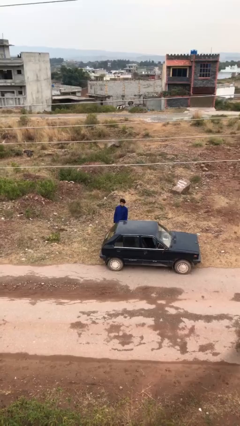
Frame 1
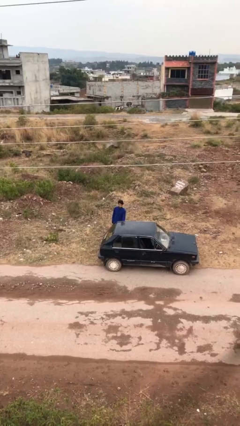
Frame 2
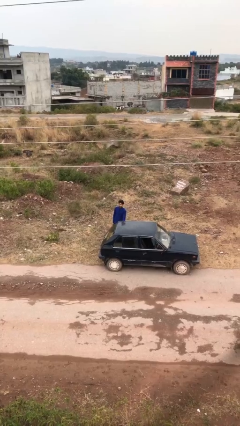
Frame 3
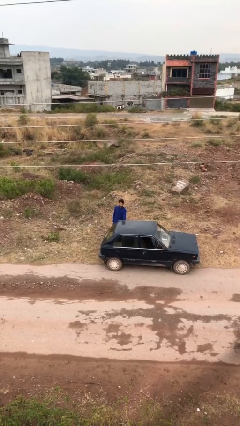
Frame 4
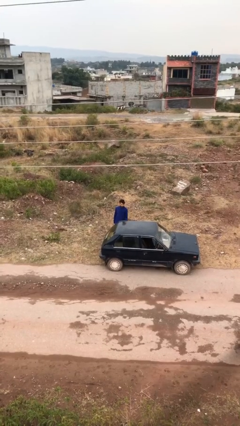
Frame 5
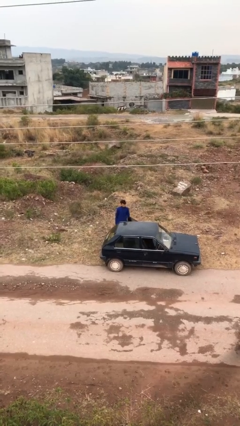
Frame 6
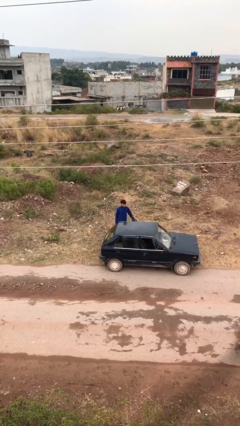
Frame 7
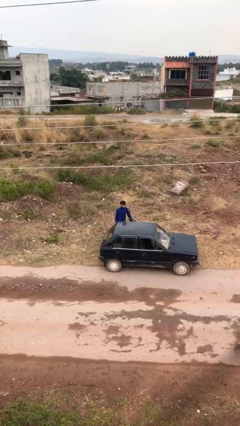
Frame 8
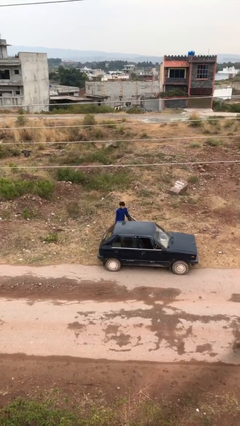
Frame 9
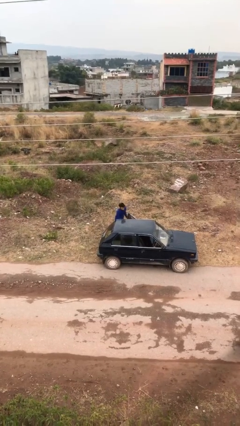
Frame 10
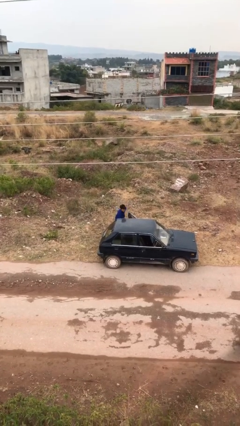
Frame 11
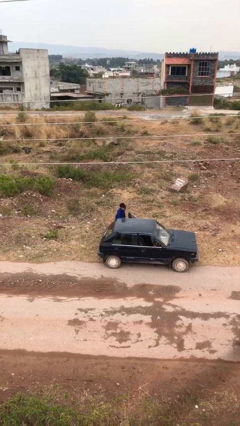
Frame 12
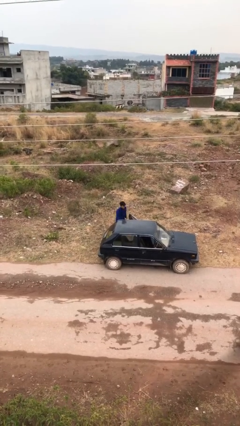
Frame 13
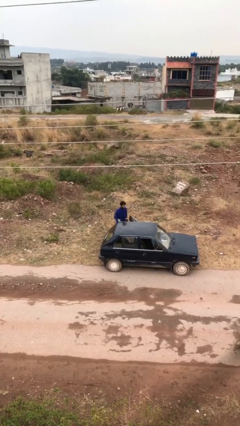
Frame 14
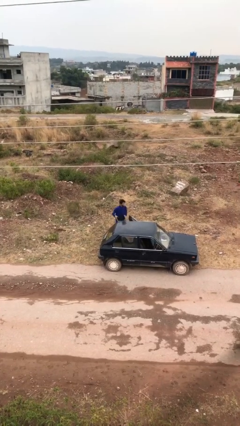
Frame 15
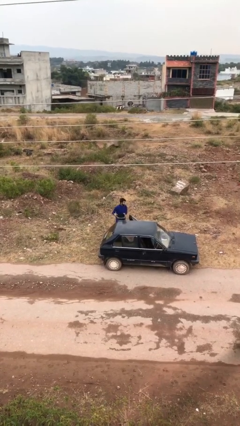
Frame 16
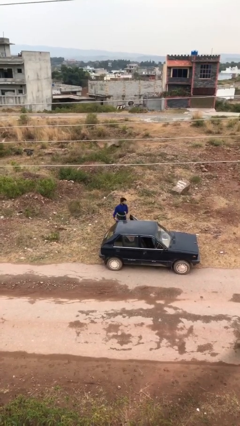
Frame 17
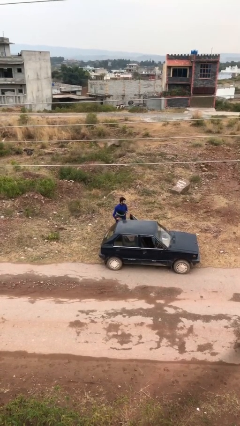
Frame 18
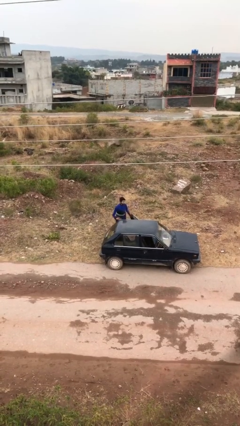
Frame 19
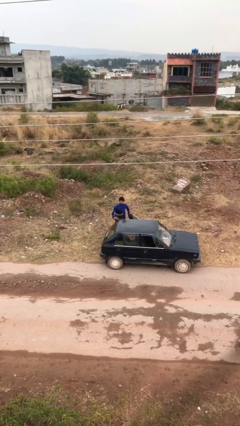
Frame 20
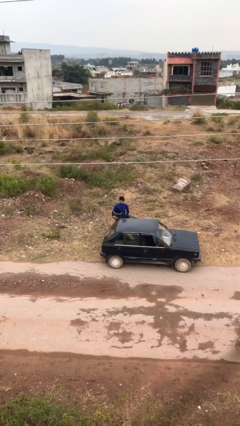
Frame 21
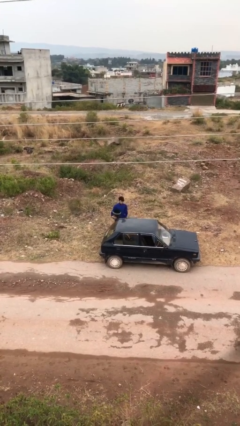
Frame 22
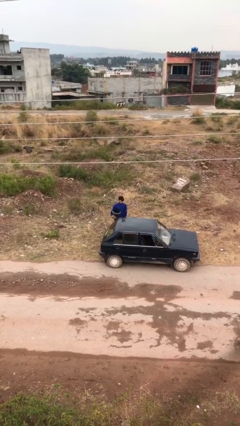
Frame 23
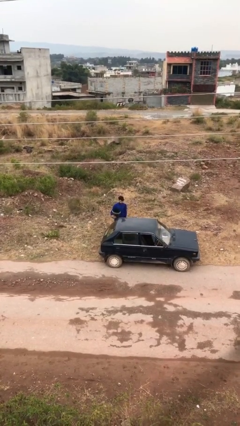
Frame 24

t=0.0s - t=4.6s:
person unloads car

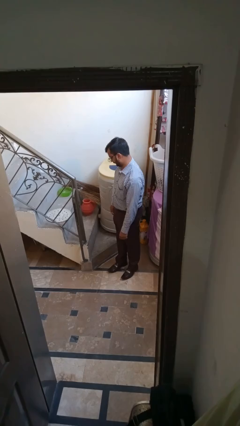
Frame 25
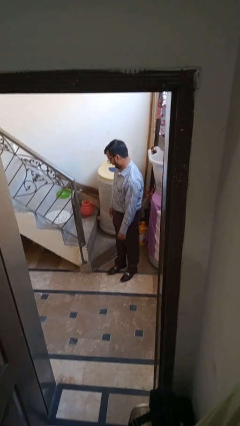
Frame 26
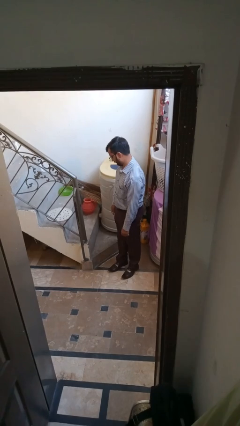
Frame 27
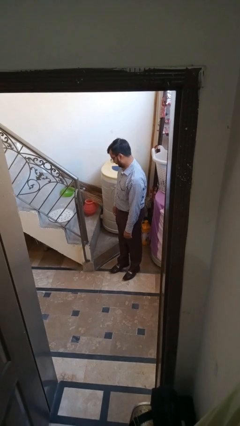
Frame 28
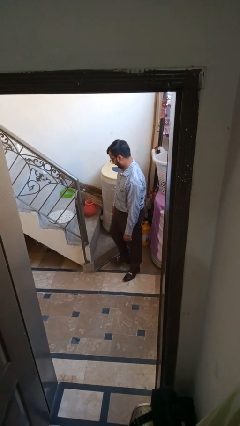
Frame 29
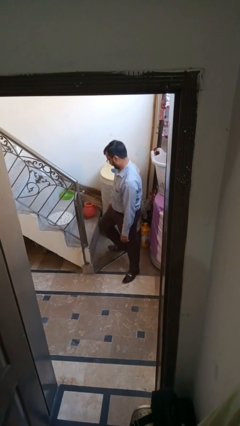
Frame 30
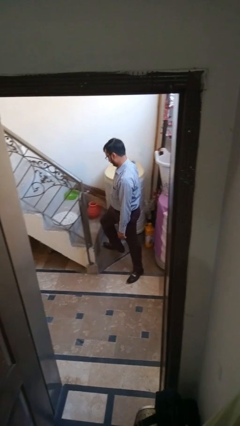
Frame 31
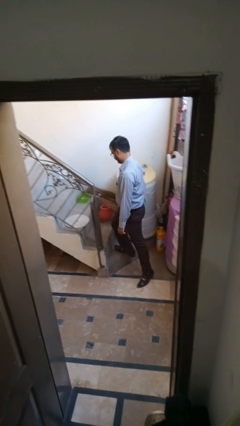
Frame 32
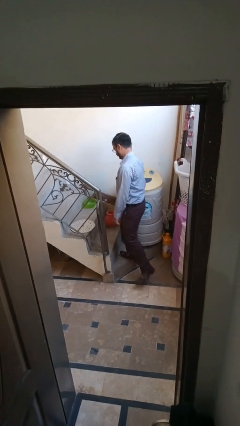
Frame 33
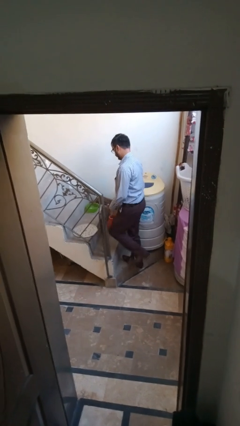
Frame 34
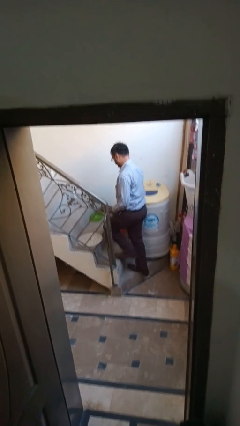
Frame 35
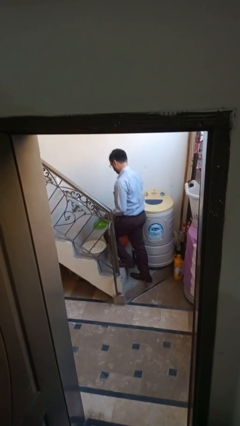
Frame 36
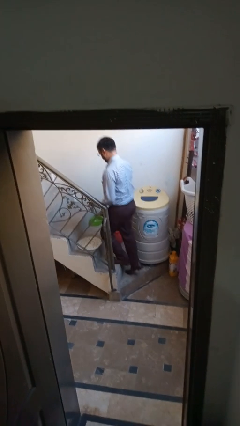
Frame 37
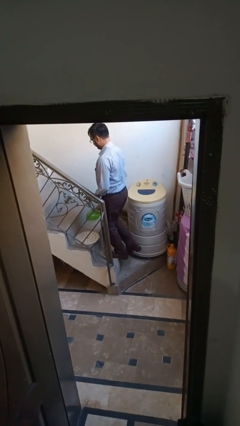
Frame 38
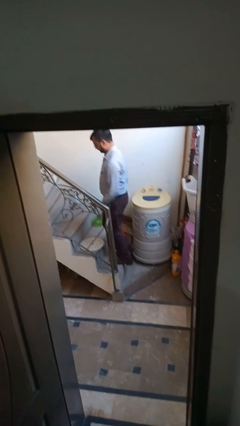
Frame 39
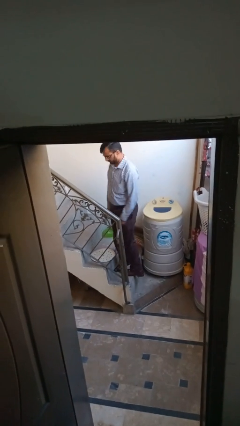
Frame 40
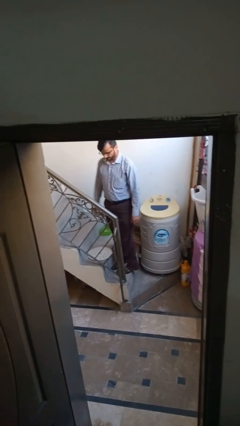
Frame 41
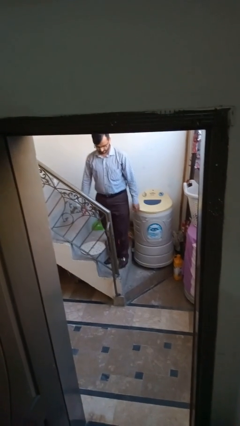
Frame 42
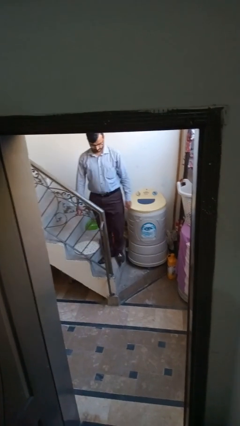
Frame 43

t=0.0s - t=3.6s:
person climbs up stairs

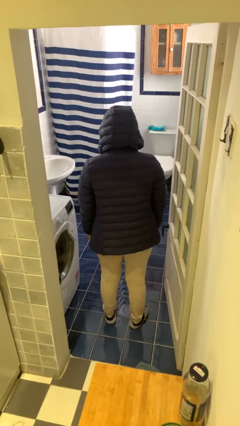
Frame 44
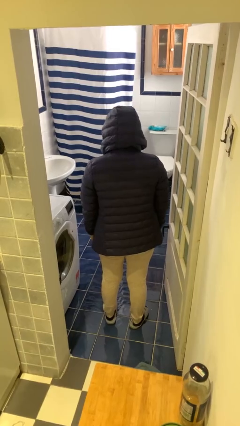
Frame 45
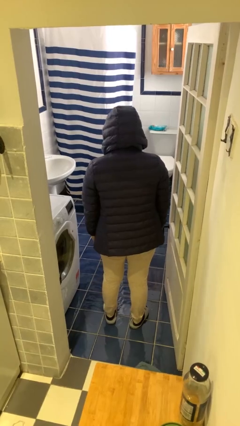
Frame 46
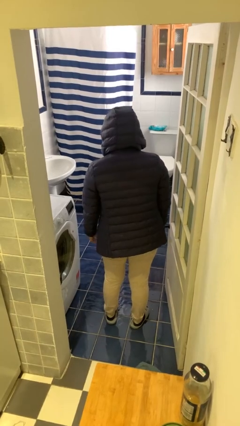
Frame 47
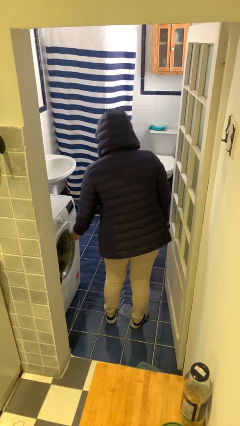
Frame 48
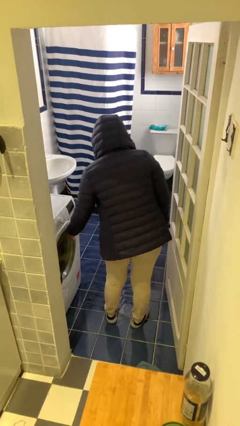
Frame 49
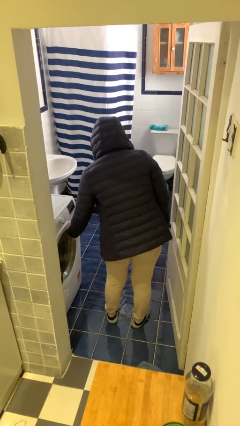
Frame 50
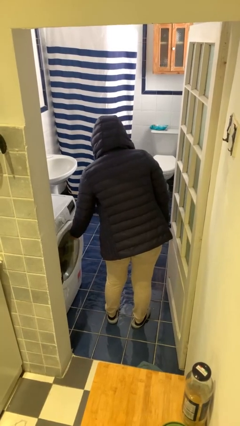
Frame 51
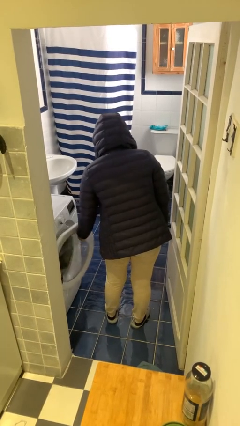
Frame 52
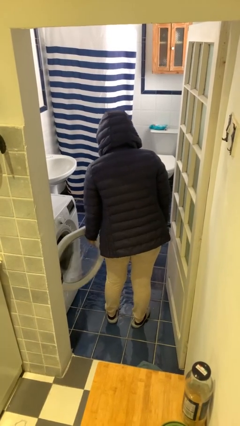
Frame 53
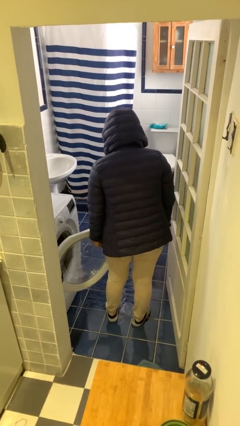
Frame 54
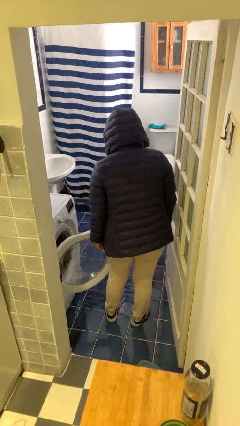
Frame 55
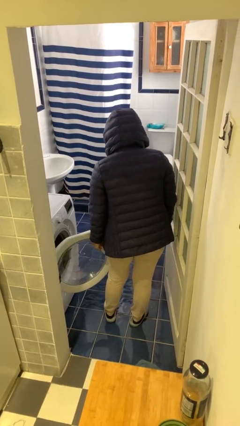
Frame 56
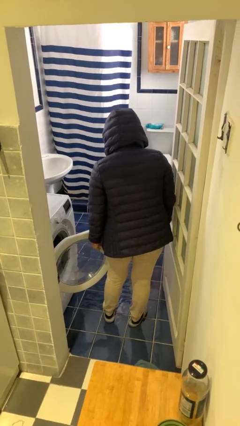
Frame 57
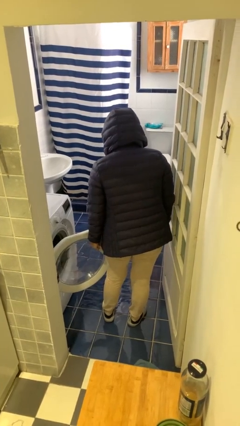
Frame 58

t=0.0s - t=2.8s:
person opens clothes washer

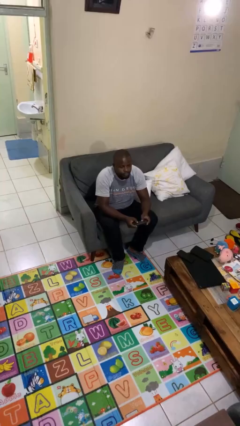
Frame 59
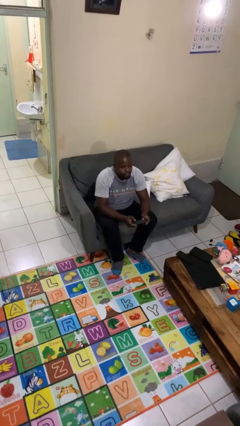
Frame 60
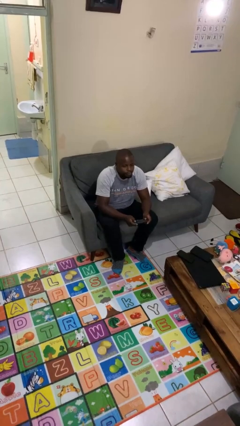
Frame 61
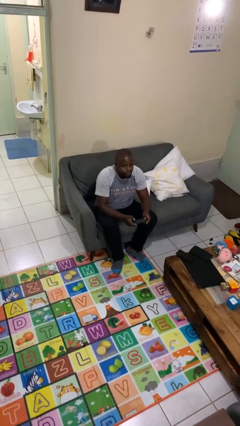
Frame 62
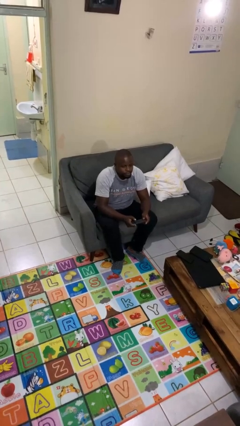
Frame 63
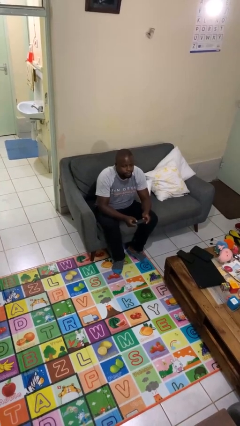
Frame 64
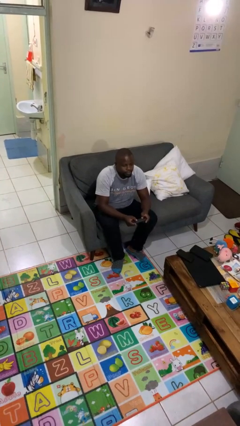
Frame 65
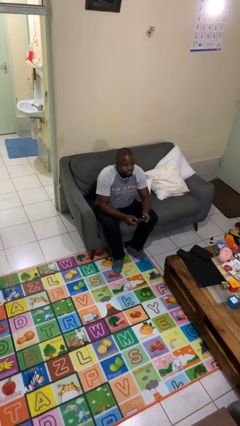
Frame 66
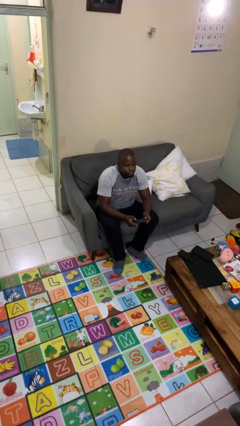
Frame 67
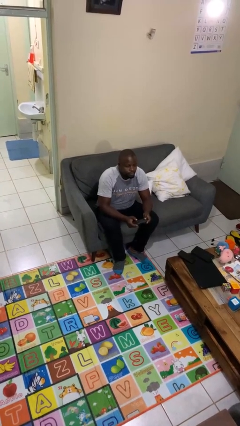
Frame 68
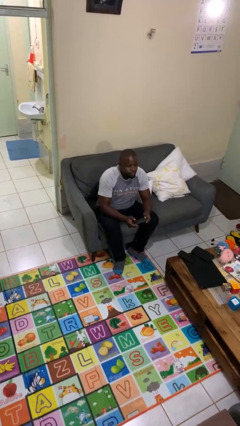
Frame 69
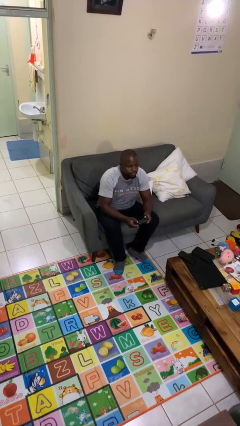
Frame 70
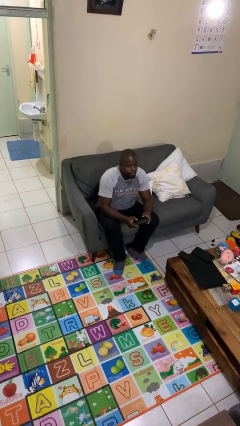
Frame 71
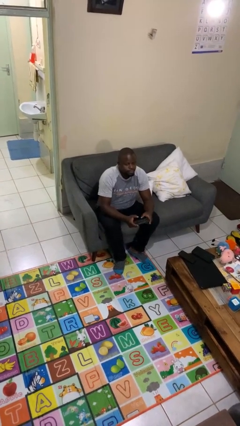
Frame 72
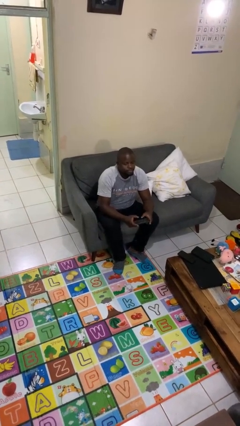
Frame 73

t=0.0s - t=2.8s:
person interacts with handheld game

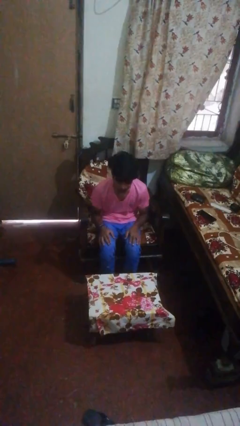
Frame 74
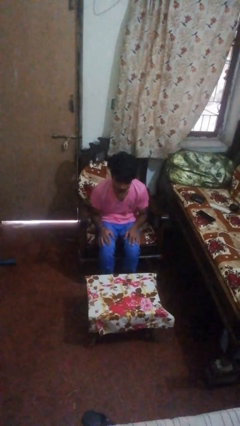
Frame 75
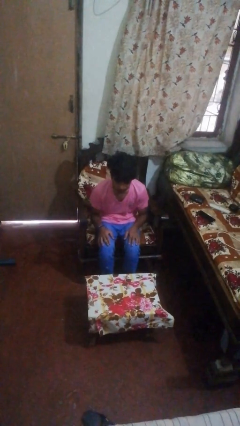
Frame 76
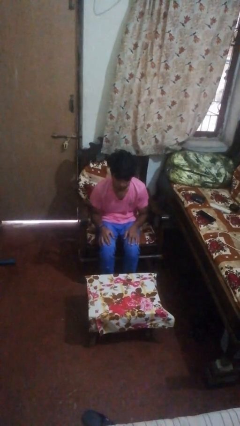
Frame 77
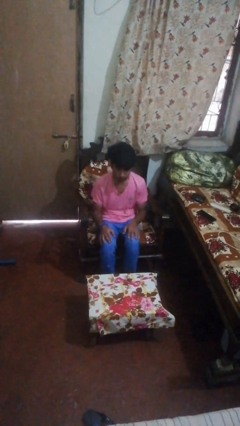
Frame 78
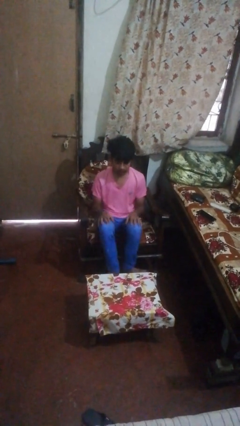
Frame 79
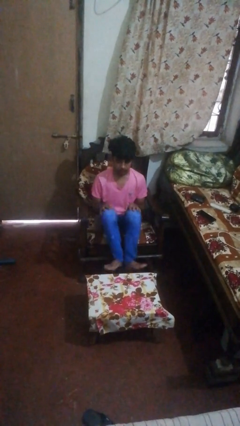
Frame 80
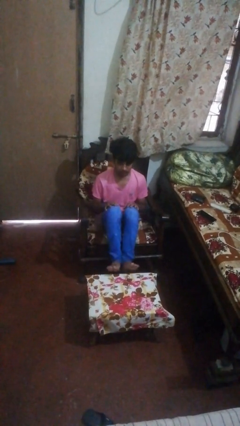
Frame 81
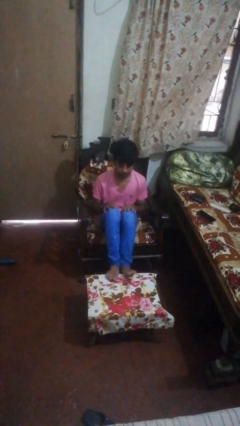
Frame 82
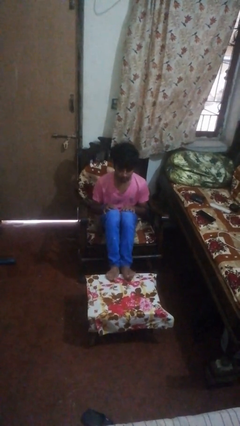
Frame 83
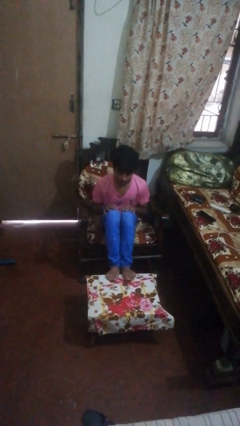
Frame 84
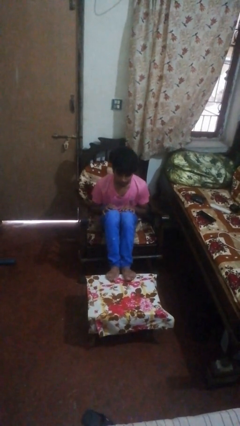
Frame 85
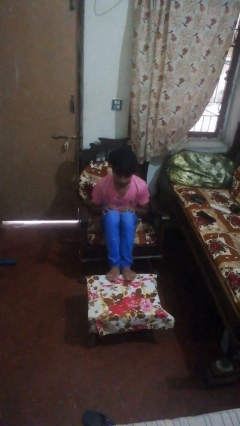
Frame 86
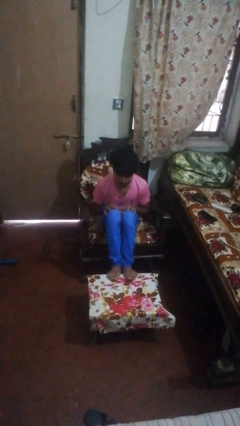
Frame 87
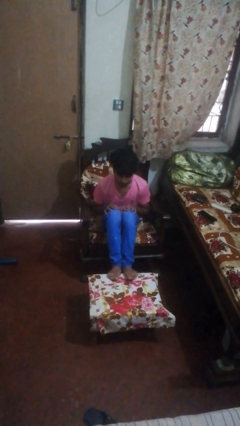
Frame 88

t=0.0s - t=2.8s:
person puts feet up

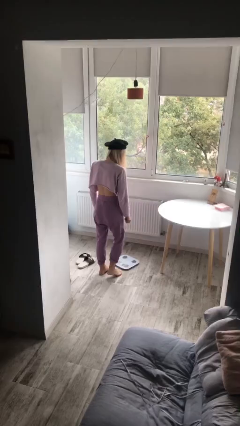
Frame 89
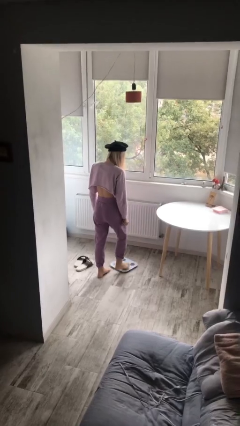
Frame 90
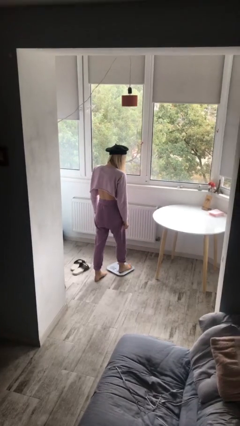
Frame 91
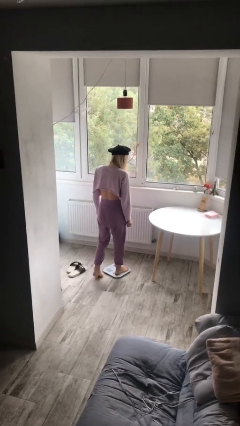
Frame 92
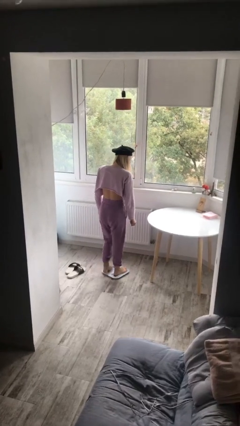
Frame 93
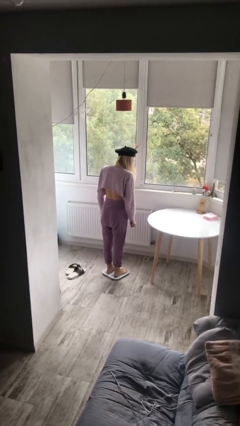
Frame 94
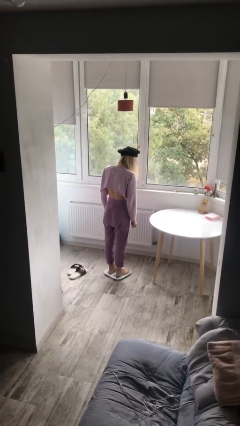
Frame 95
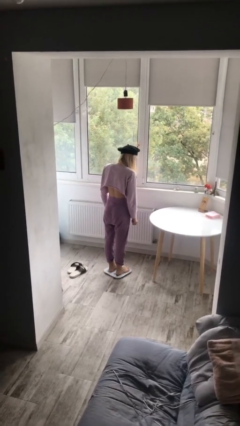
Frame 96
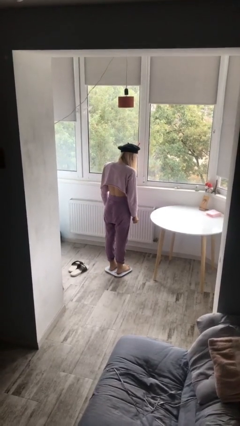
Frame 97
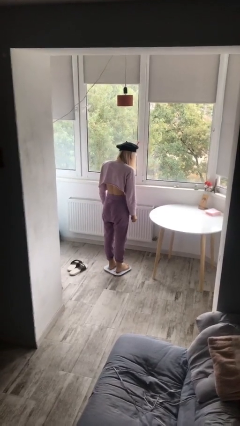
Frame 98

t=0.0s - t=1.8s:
person uses bodyweight scale
